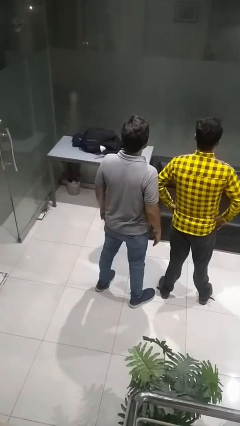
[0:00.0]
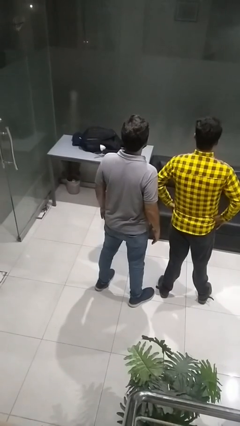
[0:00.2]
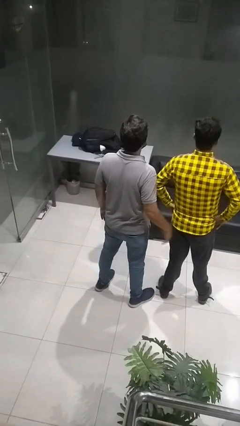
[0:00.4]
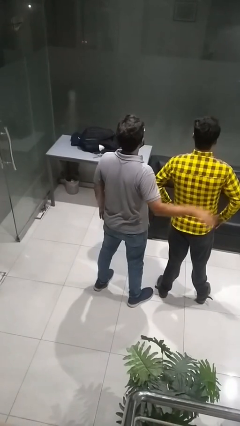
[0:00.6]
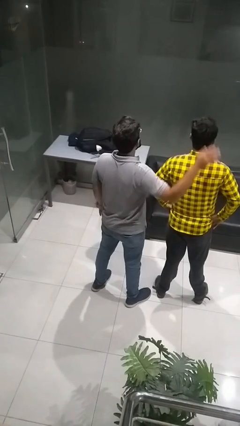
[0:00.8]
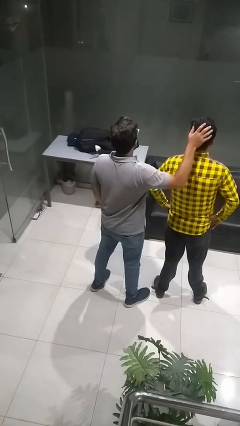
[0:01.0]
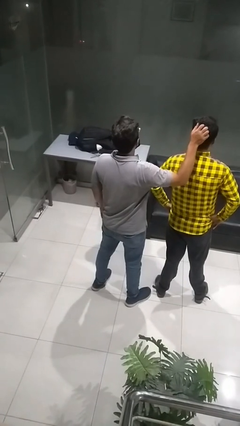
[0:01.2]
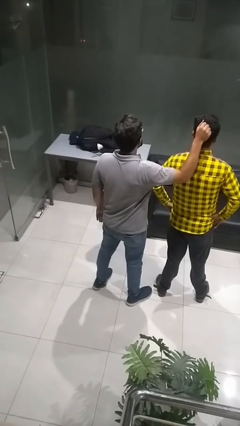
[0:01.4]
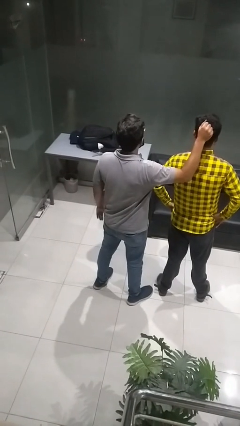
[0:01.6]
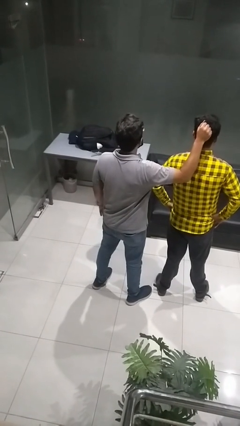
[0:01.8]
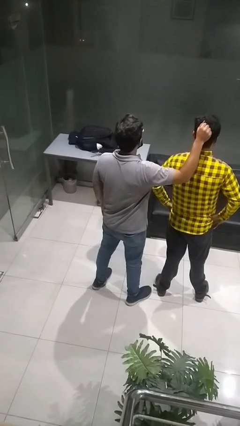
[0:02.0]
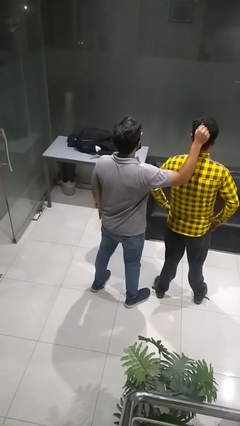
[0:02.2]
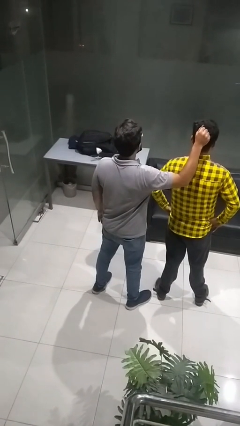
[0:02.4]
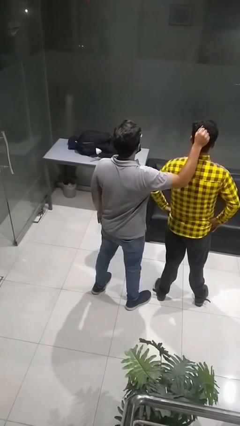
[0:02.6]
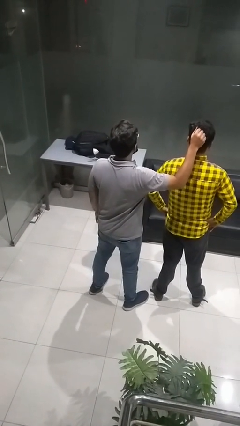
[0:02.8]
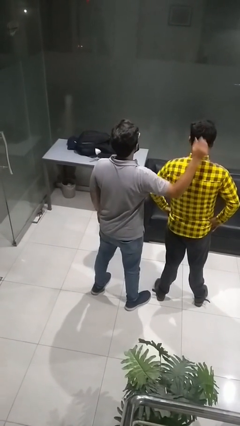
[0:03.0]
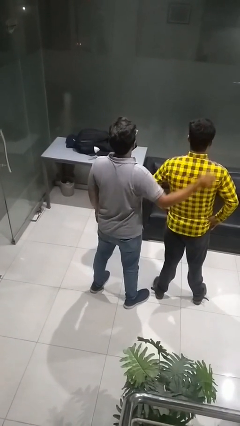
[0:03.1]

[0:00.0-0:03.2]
person grabs person by hair

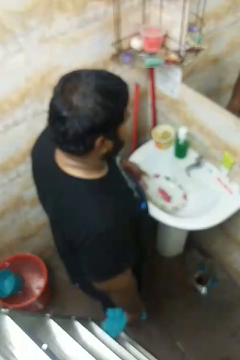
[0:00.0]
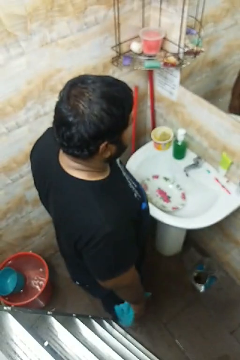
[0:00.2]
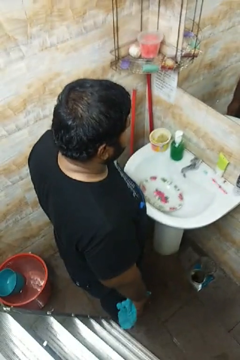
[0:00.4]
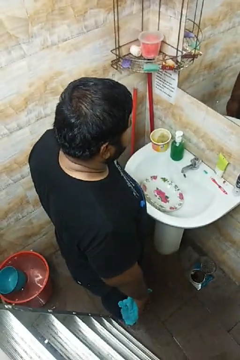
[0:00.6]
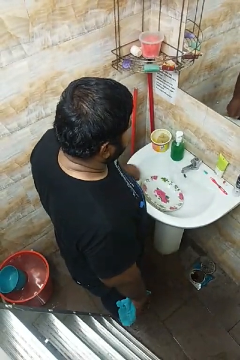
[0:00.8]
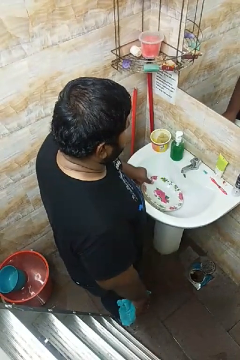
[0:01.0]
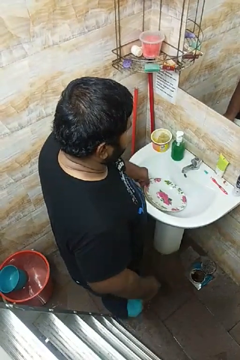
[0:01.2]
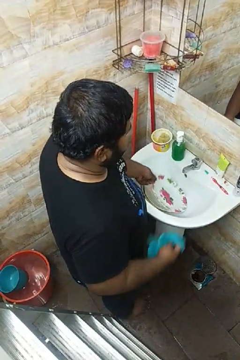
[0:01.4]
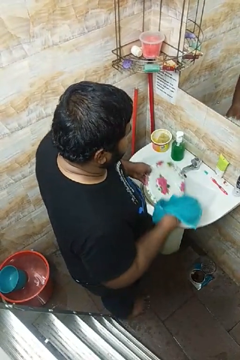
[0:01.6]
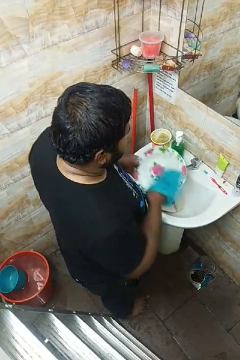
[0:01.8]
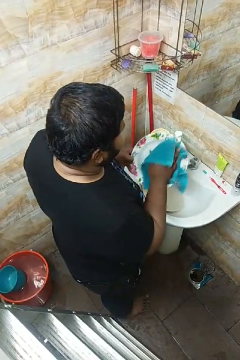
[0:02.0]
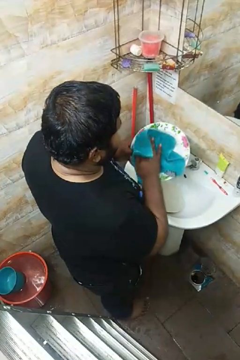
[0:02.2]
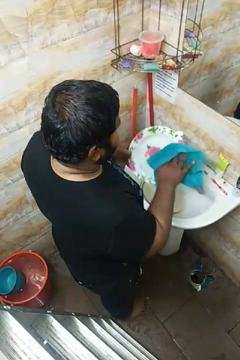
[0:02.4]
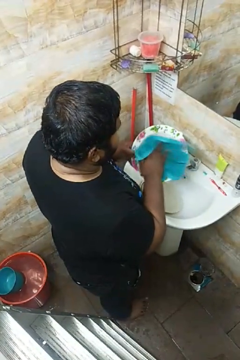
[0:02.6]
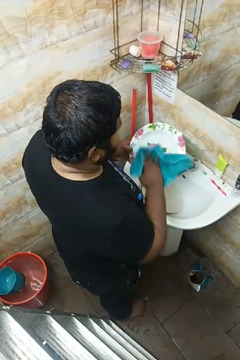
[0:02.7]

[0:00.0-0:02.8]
person dries dish

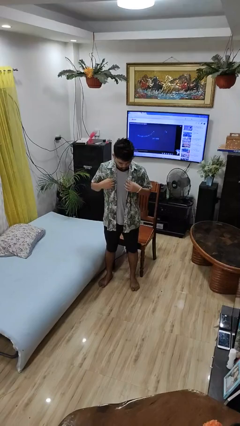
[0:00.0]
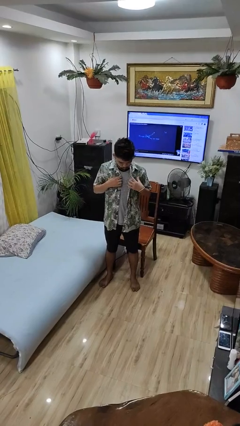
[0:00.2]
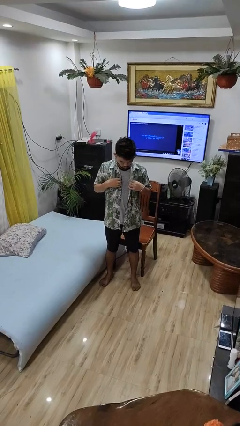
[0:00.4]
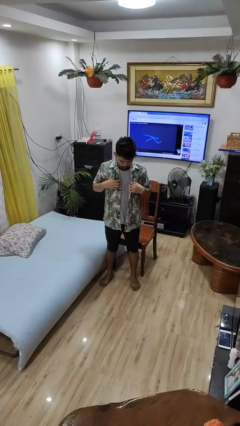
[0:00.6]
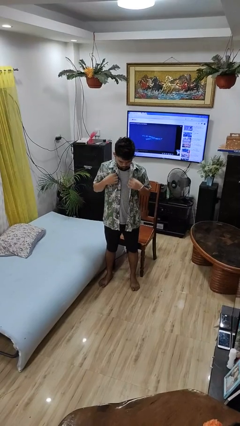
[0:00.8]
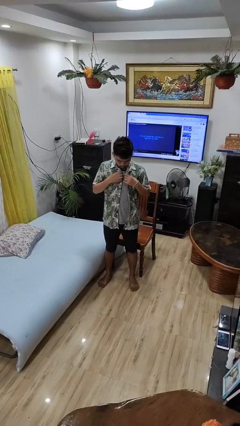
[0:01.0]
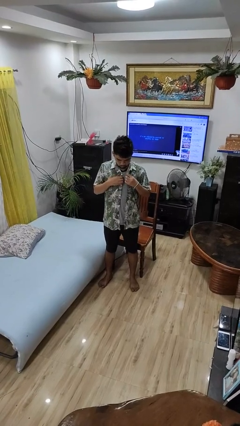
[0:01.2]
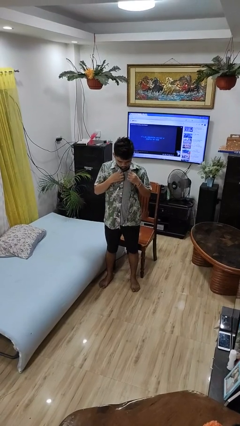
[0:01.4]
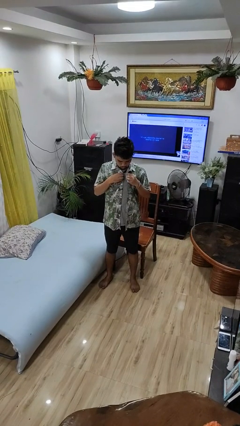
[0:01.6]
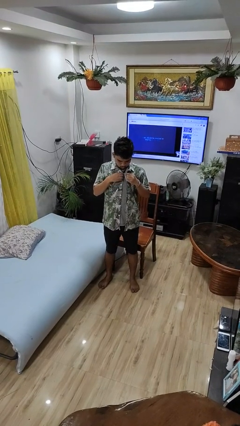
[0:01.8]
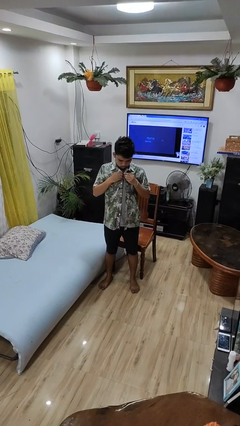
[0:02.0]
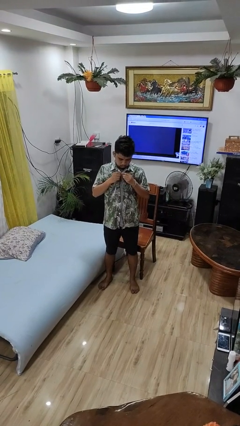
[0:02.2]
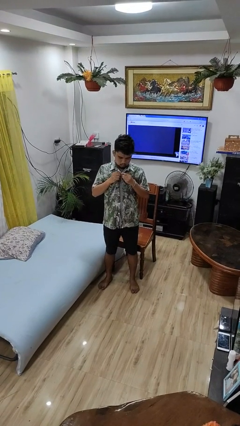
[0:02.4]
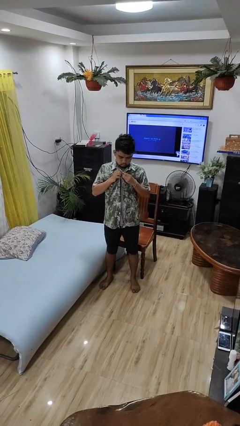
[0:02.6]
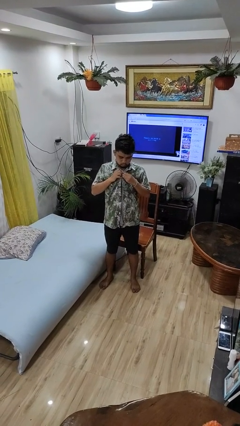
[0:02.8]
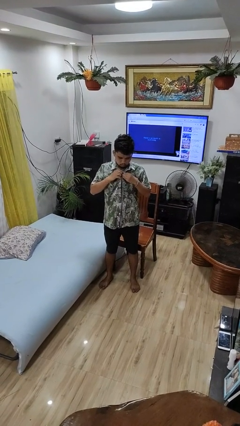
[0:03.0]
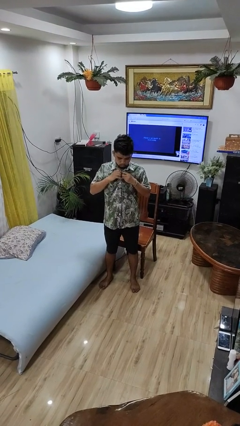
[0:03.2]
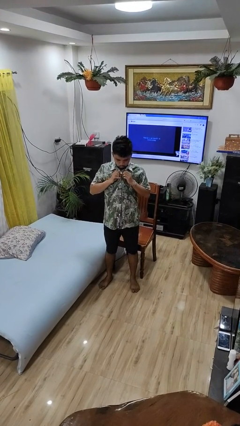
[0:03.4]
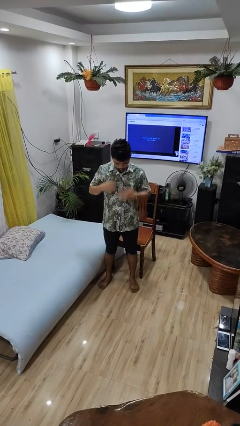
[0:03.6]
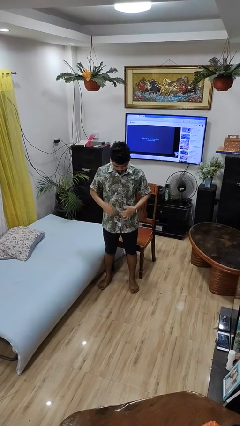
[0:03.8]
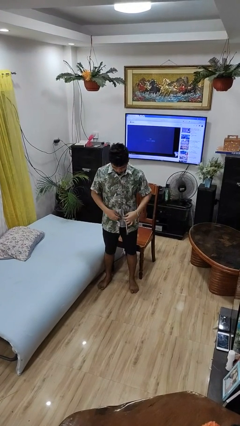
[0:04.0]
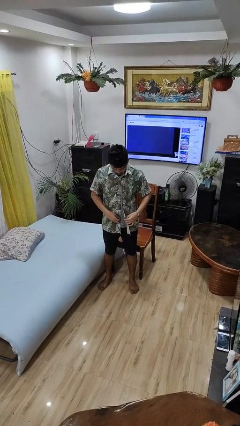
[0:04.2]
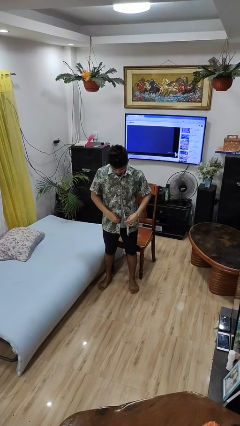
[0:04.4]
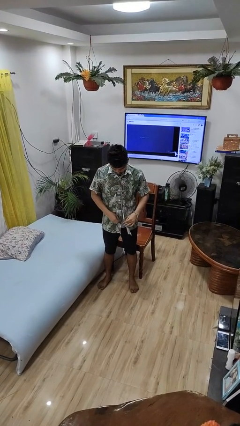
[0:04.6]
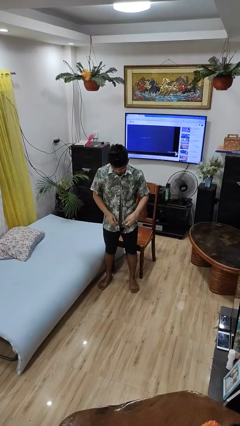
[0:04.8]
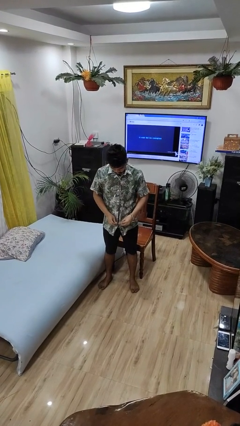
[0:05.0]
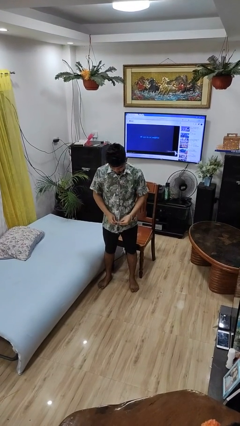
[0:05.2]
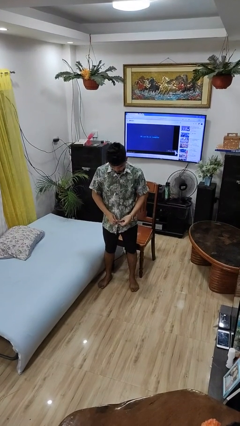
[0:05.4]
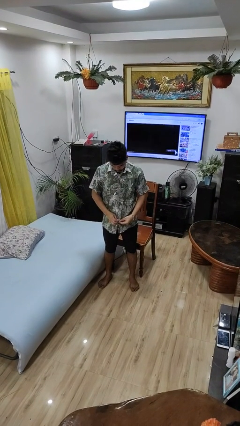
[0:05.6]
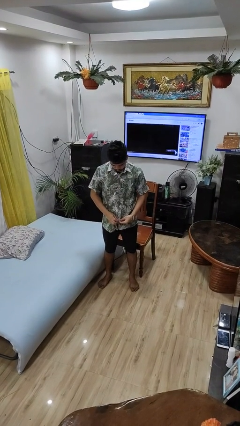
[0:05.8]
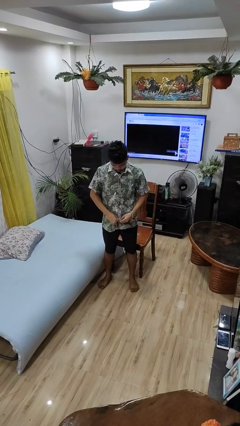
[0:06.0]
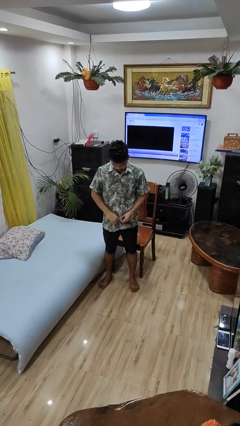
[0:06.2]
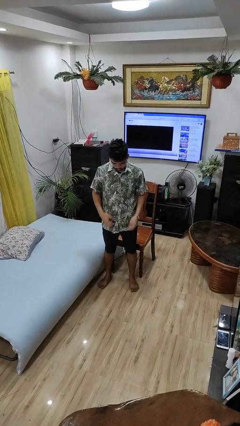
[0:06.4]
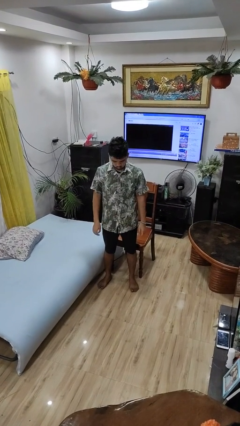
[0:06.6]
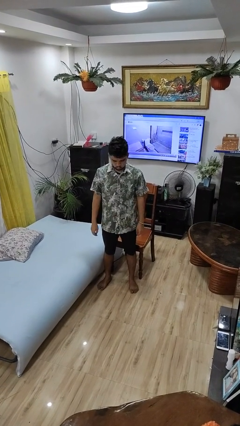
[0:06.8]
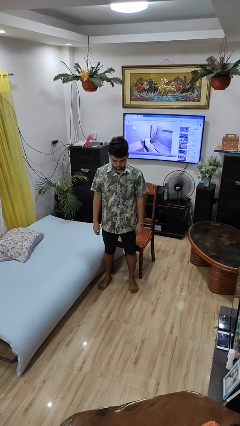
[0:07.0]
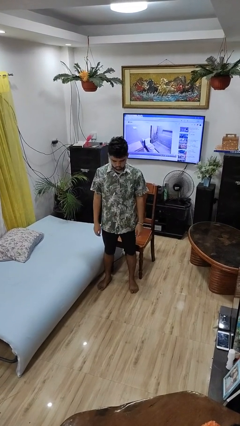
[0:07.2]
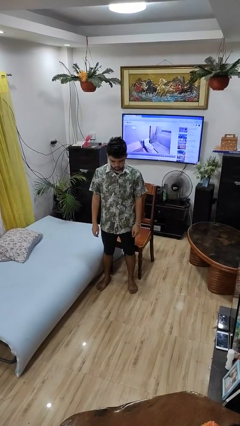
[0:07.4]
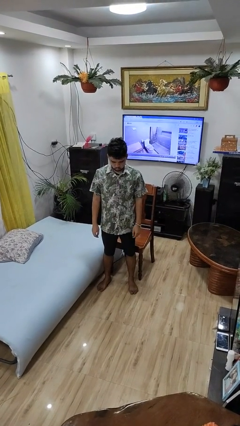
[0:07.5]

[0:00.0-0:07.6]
person buttons shirt

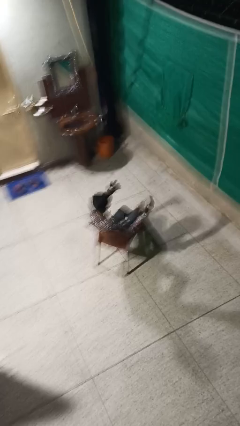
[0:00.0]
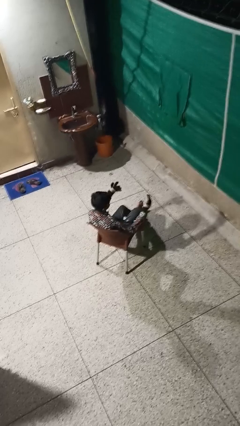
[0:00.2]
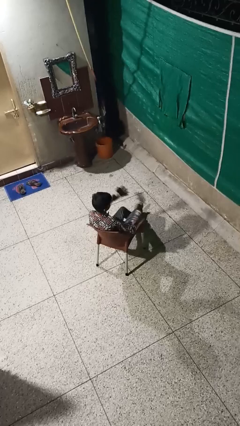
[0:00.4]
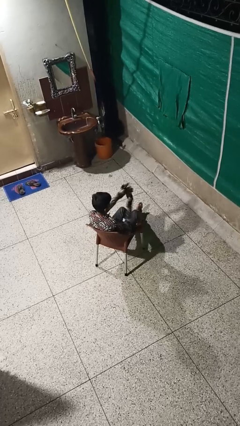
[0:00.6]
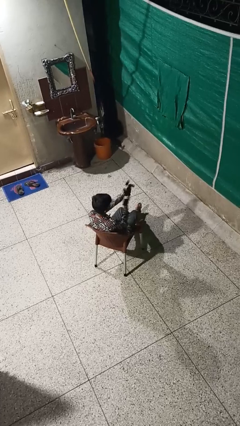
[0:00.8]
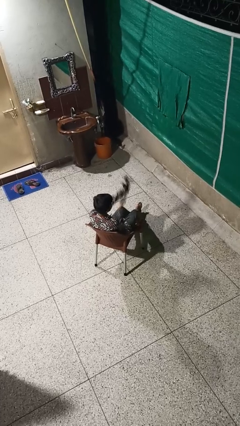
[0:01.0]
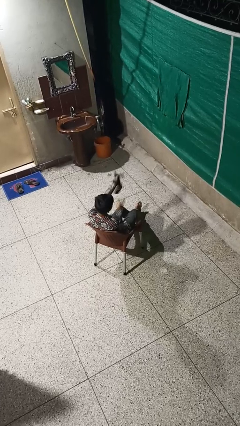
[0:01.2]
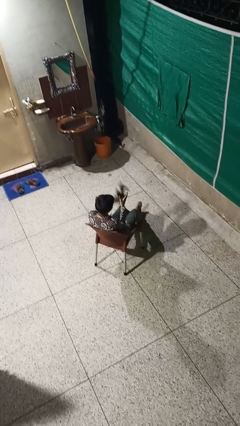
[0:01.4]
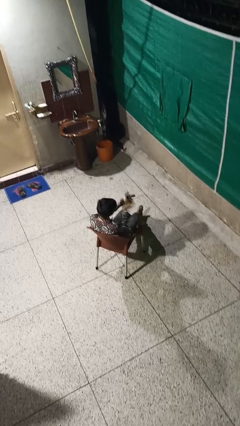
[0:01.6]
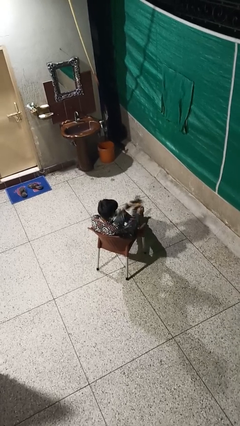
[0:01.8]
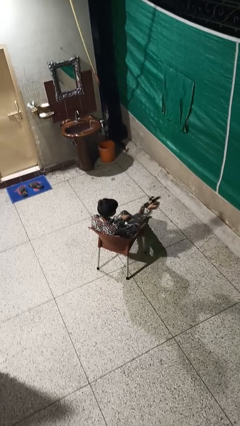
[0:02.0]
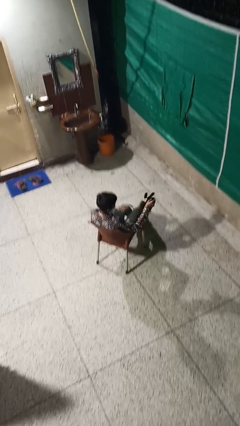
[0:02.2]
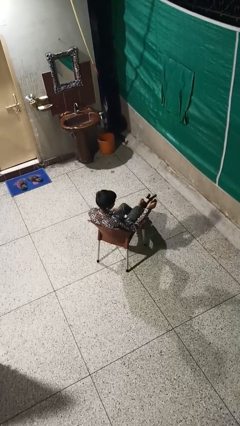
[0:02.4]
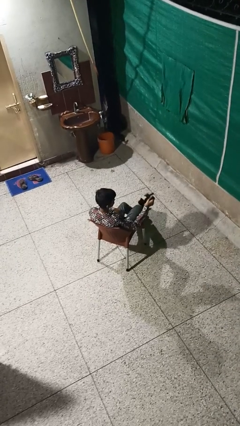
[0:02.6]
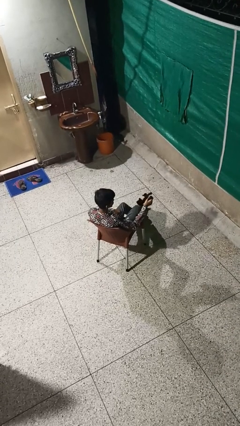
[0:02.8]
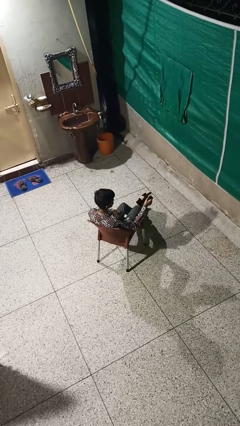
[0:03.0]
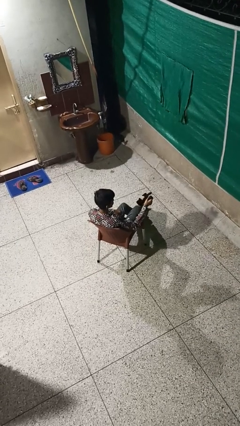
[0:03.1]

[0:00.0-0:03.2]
person takes off gloves

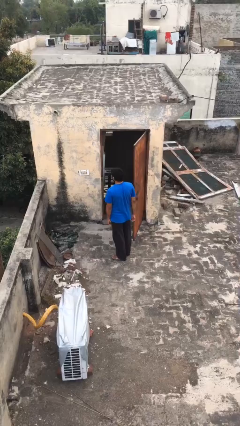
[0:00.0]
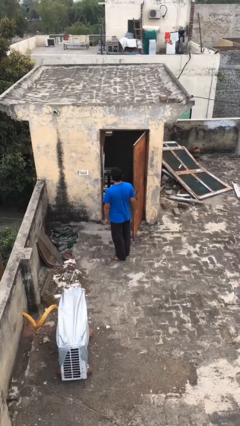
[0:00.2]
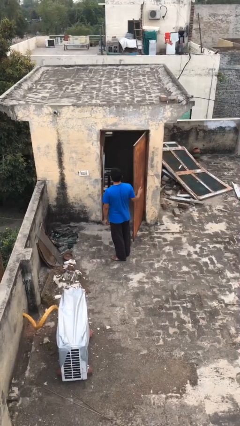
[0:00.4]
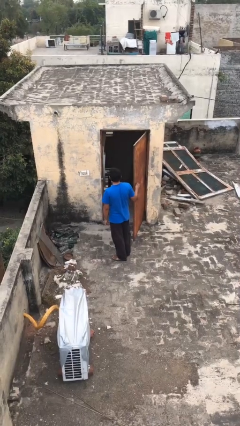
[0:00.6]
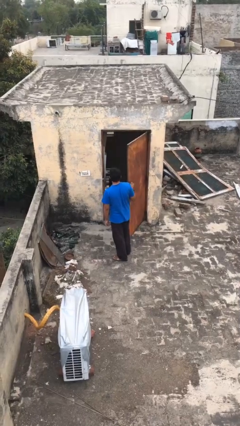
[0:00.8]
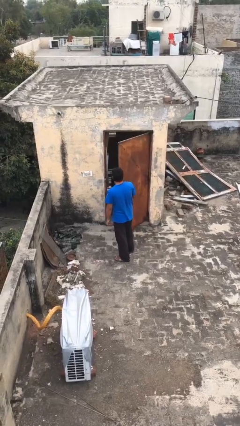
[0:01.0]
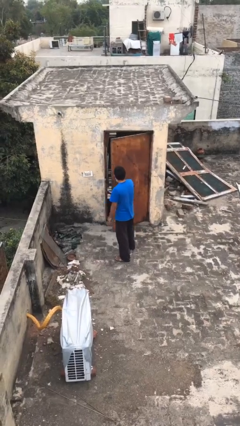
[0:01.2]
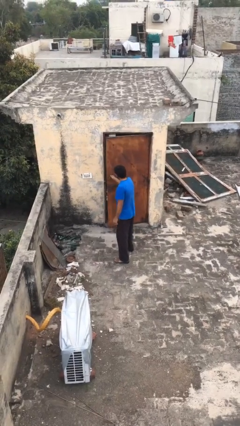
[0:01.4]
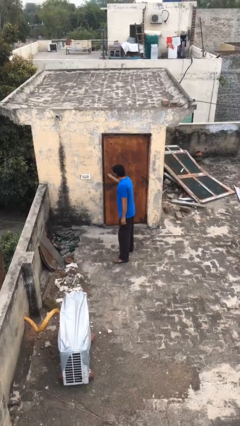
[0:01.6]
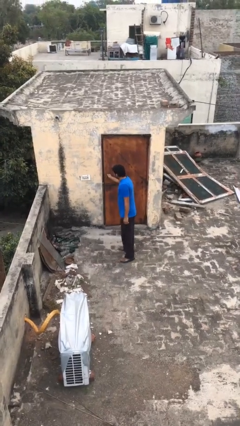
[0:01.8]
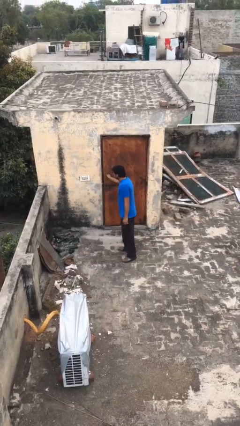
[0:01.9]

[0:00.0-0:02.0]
person closes facility door
